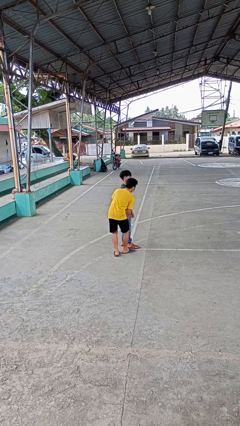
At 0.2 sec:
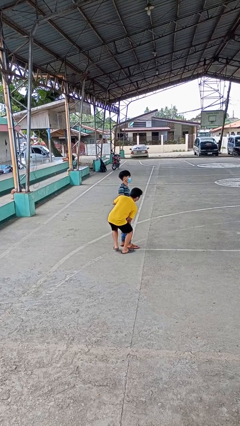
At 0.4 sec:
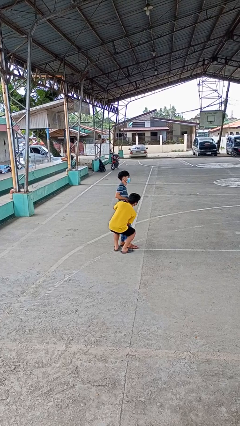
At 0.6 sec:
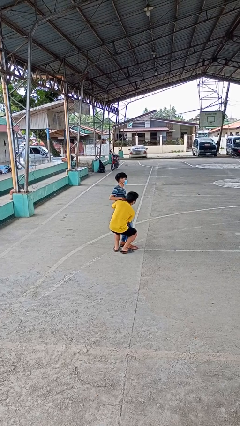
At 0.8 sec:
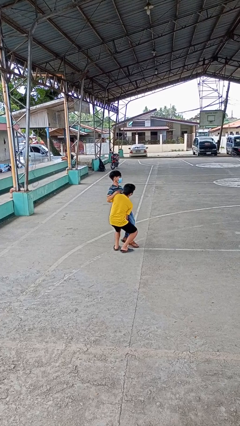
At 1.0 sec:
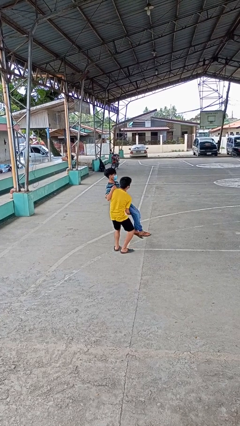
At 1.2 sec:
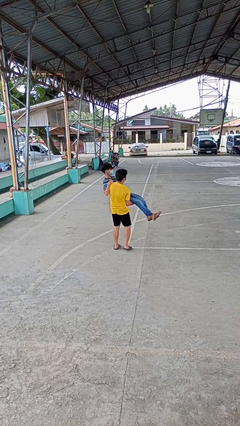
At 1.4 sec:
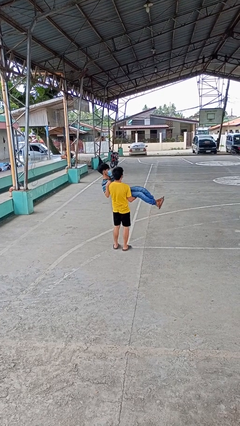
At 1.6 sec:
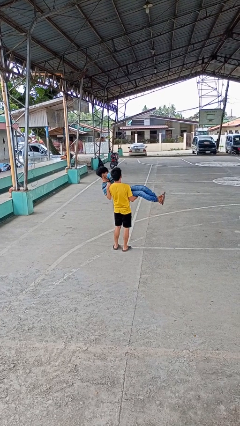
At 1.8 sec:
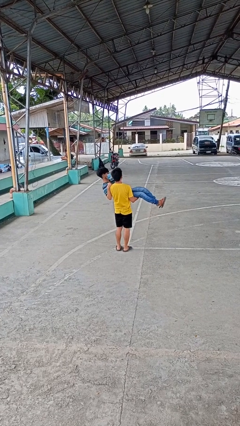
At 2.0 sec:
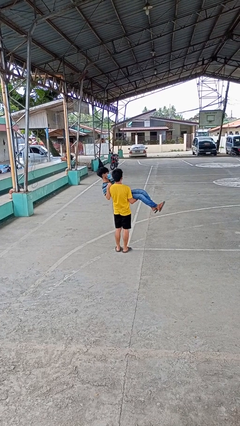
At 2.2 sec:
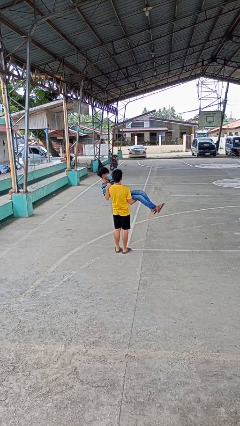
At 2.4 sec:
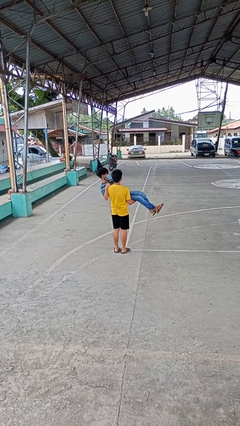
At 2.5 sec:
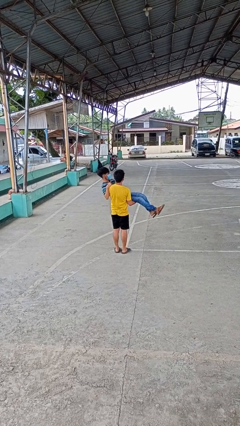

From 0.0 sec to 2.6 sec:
person picks up person

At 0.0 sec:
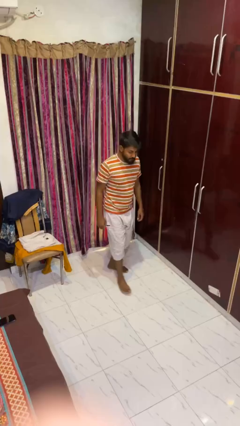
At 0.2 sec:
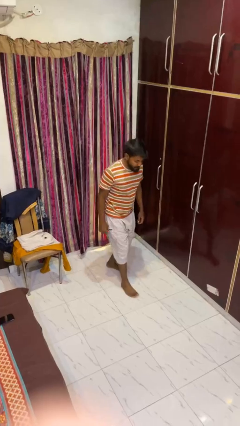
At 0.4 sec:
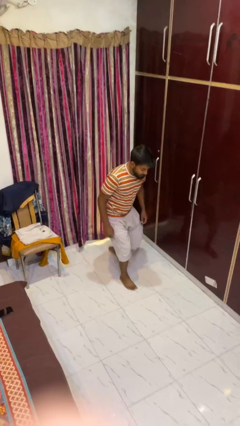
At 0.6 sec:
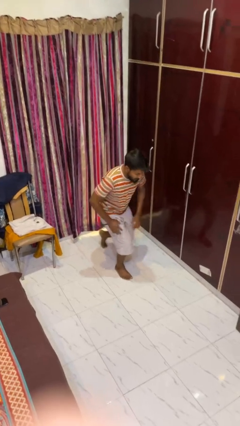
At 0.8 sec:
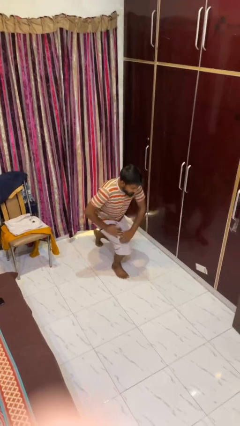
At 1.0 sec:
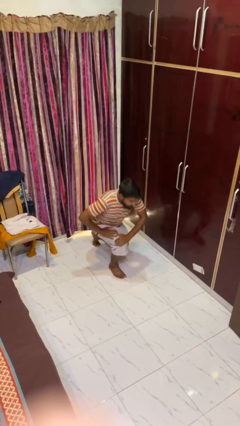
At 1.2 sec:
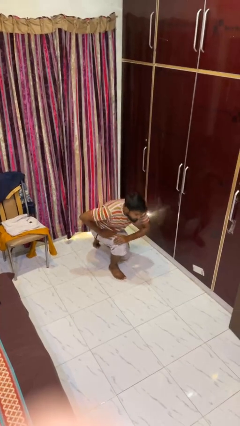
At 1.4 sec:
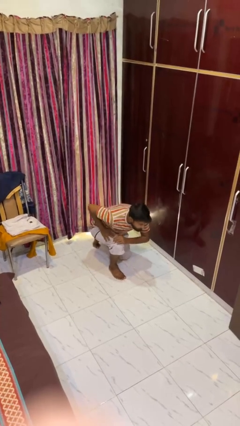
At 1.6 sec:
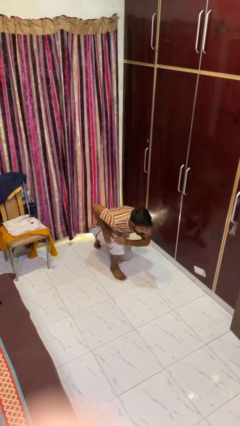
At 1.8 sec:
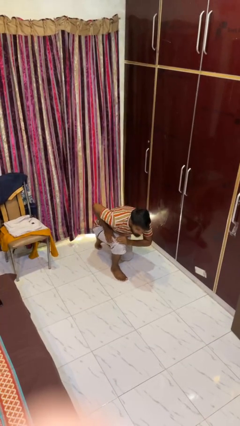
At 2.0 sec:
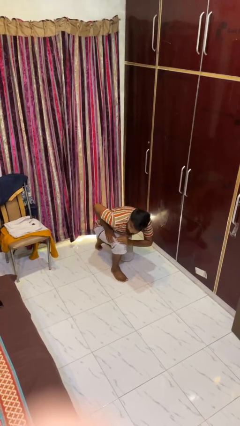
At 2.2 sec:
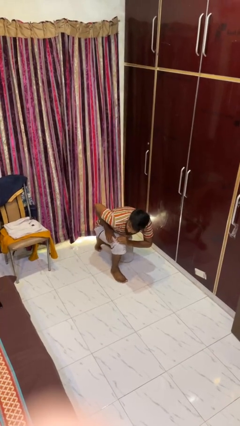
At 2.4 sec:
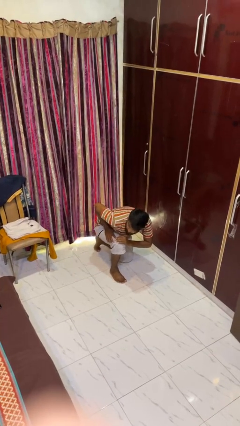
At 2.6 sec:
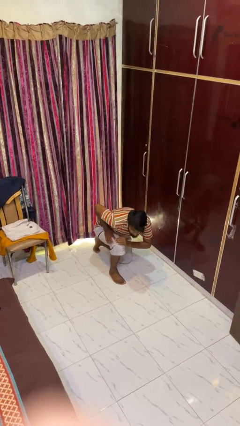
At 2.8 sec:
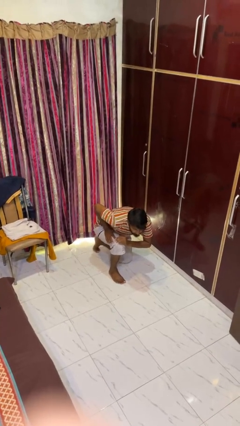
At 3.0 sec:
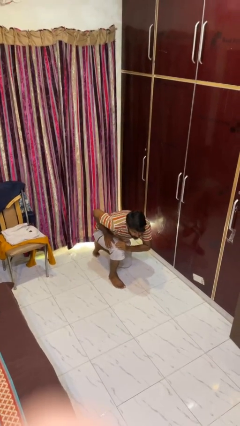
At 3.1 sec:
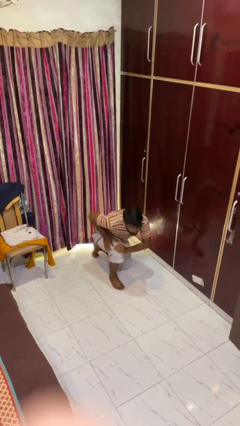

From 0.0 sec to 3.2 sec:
person kneels

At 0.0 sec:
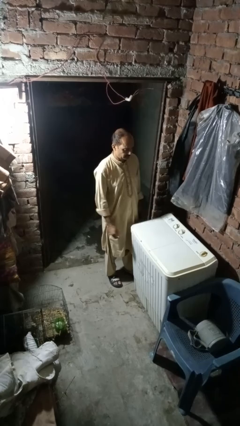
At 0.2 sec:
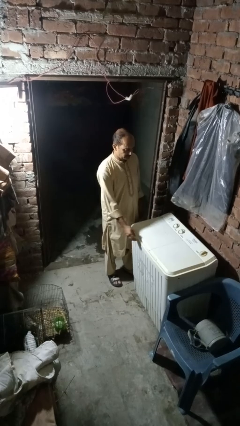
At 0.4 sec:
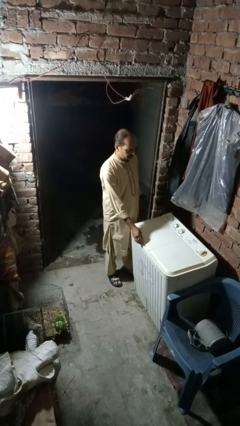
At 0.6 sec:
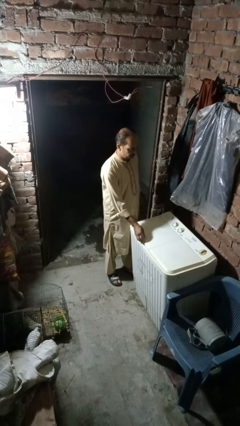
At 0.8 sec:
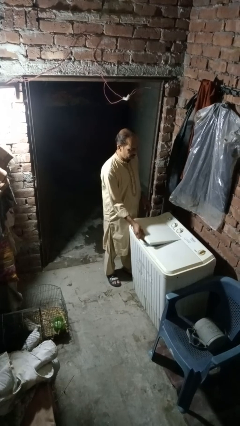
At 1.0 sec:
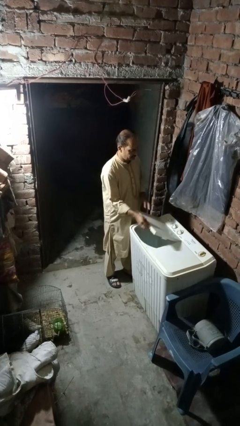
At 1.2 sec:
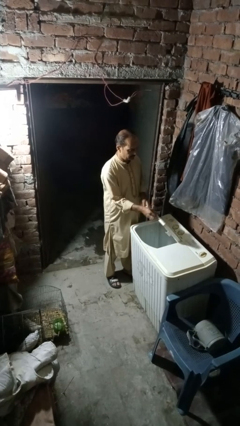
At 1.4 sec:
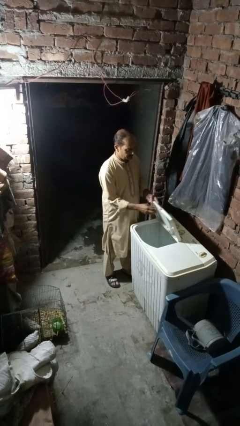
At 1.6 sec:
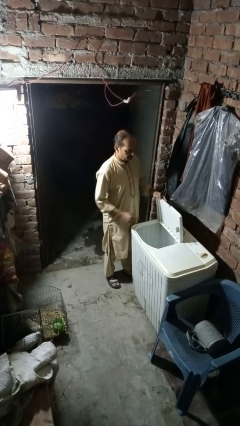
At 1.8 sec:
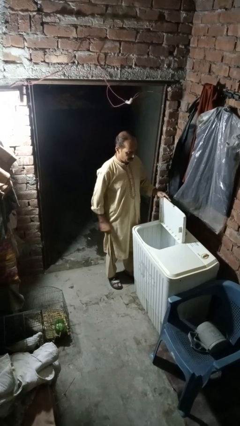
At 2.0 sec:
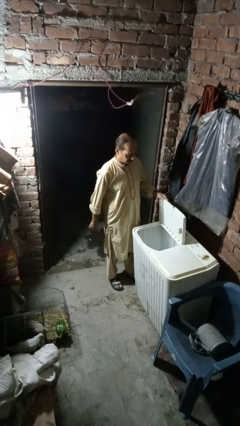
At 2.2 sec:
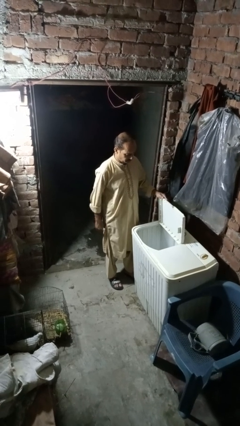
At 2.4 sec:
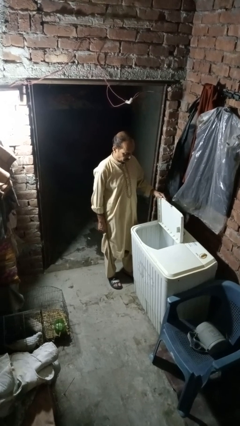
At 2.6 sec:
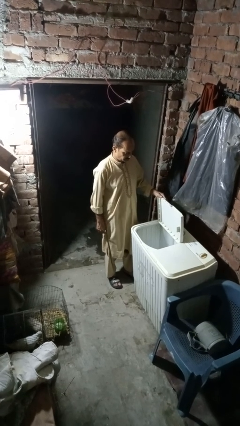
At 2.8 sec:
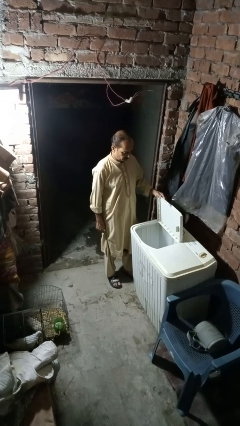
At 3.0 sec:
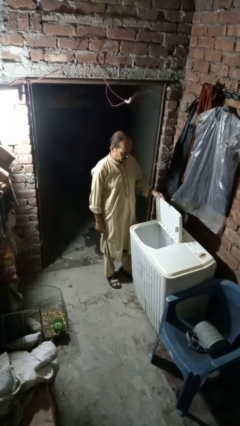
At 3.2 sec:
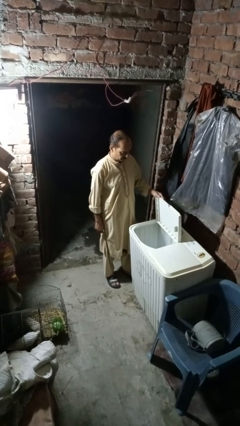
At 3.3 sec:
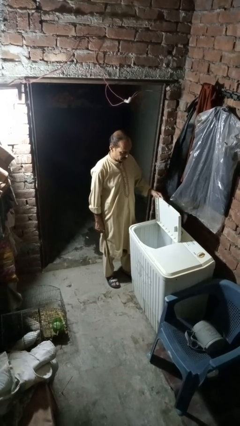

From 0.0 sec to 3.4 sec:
person opens clothes washer

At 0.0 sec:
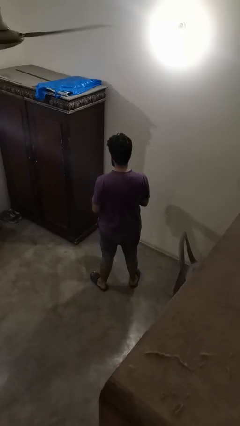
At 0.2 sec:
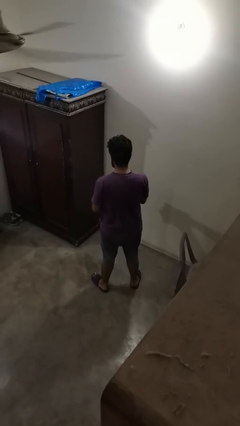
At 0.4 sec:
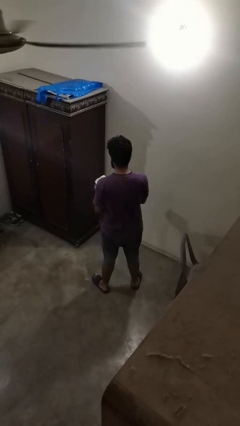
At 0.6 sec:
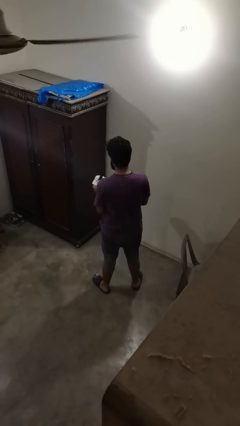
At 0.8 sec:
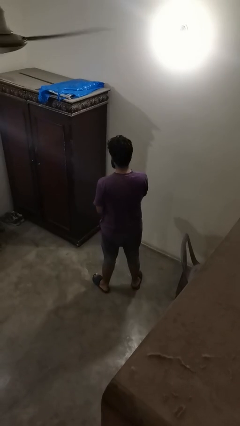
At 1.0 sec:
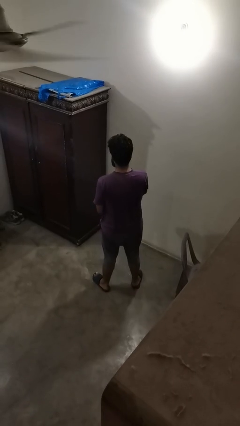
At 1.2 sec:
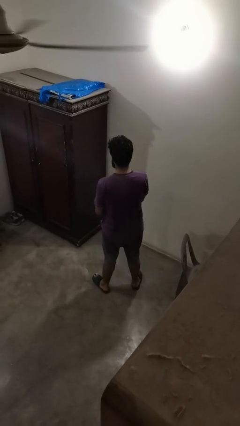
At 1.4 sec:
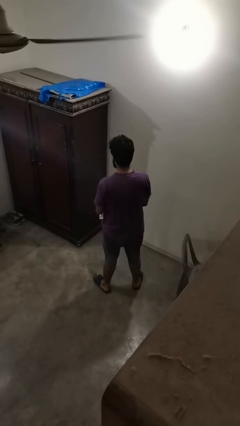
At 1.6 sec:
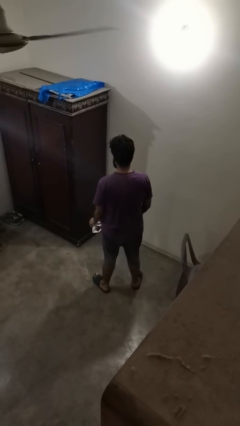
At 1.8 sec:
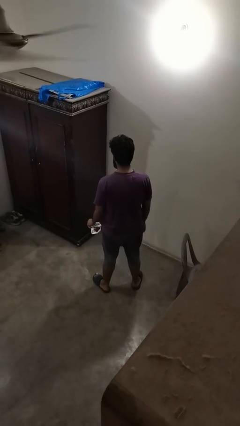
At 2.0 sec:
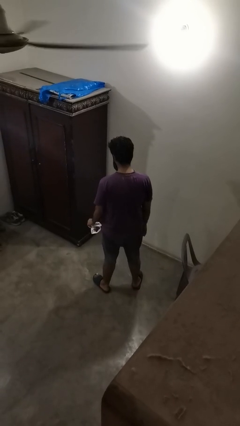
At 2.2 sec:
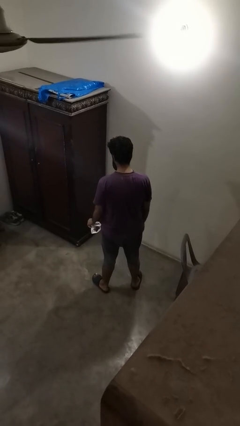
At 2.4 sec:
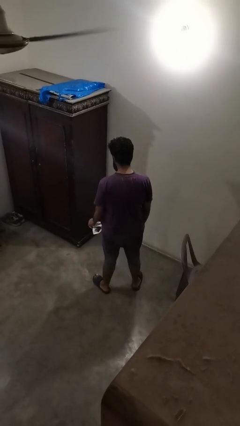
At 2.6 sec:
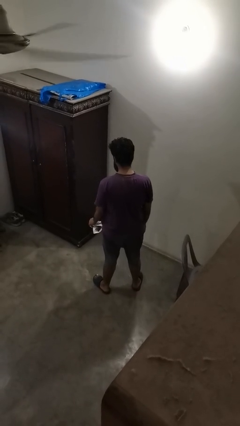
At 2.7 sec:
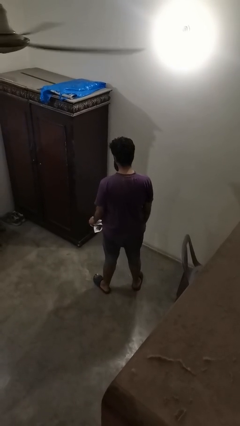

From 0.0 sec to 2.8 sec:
person crumples paper

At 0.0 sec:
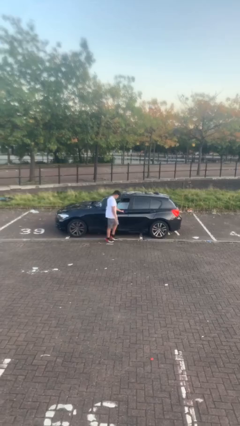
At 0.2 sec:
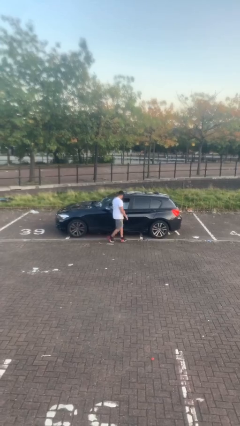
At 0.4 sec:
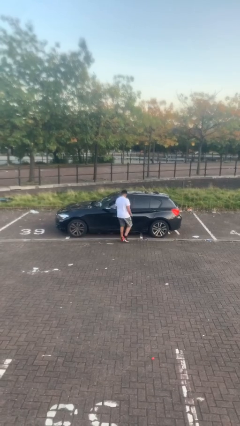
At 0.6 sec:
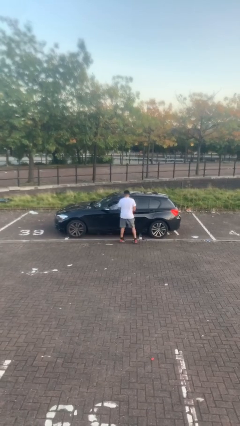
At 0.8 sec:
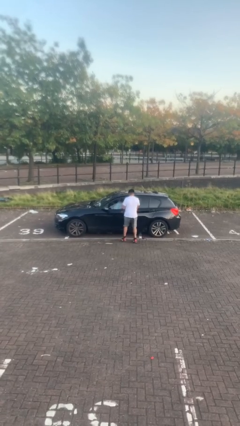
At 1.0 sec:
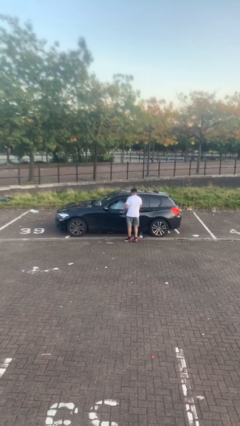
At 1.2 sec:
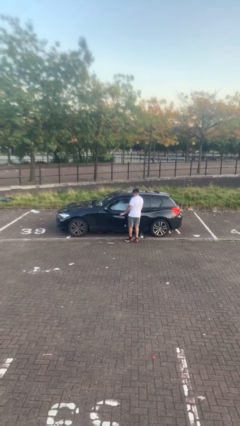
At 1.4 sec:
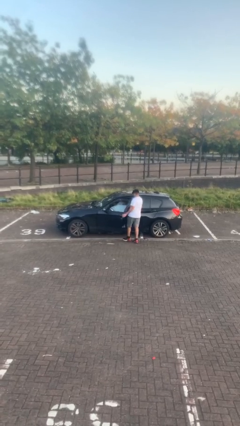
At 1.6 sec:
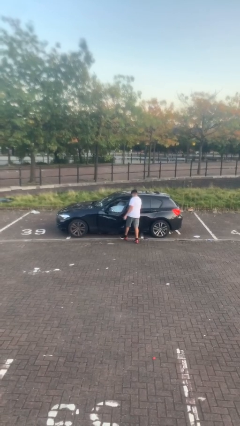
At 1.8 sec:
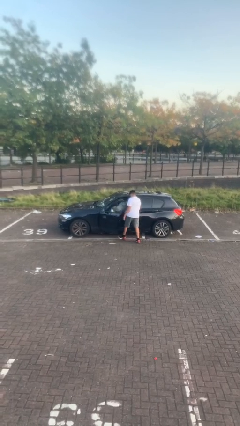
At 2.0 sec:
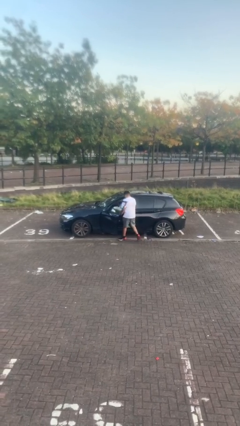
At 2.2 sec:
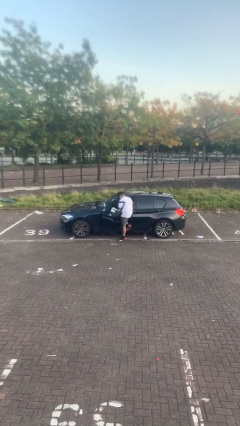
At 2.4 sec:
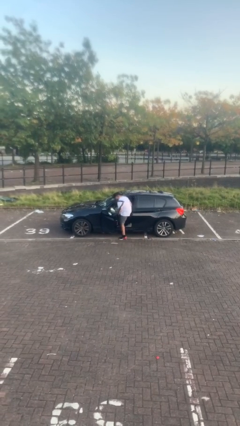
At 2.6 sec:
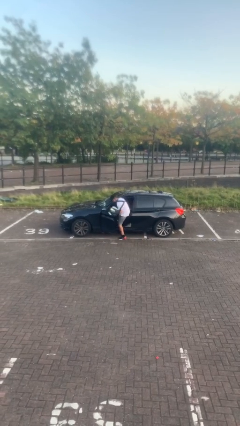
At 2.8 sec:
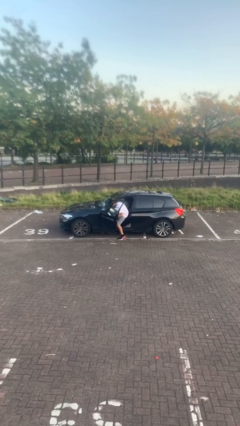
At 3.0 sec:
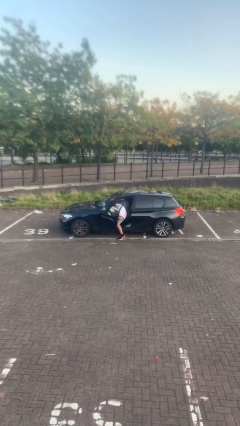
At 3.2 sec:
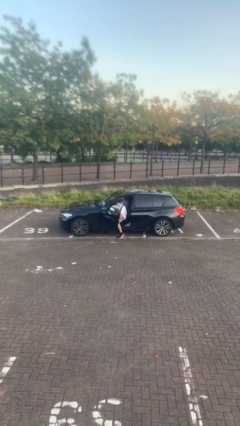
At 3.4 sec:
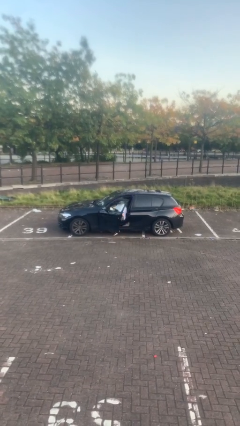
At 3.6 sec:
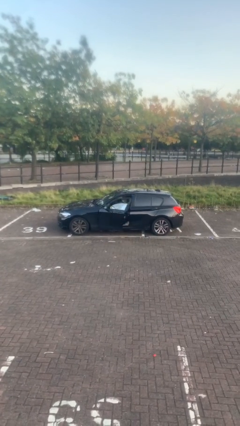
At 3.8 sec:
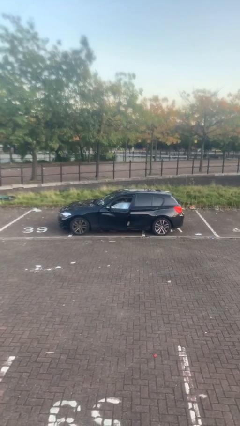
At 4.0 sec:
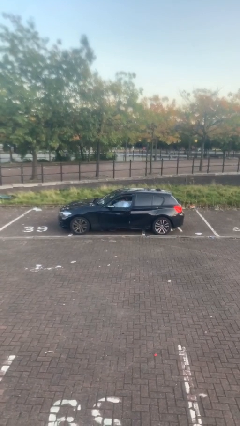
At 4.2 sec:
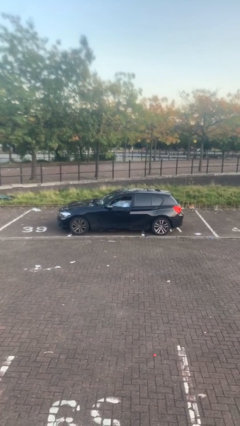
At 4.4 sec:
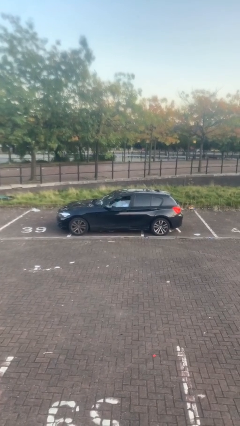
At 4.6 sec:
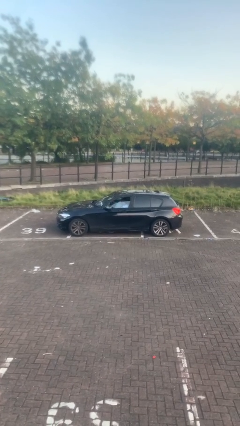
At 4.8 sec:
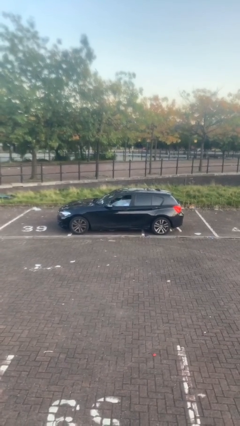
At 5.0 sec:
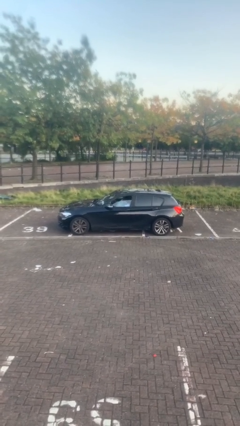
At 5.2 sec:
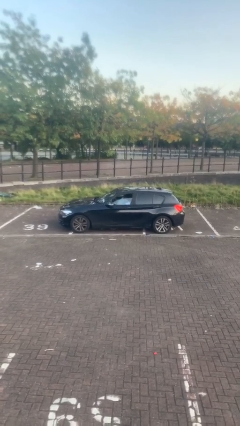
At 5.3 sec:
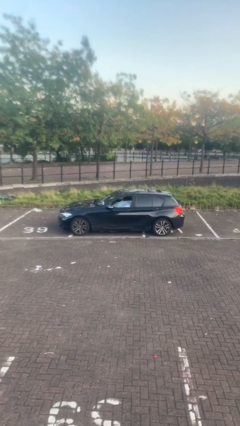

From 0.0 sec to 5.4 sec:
car picks up person
